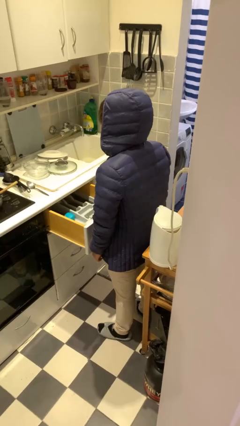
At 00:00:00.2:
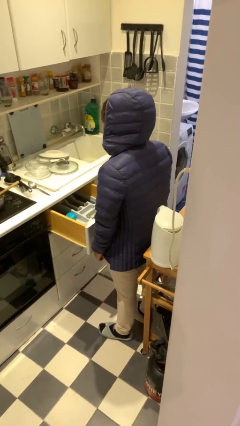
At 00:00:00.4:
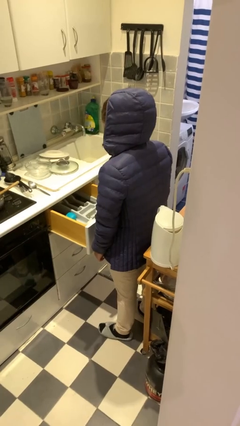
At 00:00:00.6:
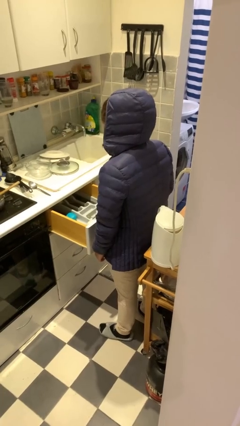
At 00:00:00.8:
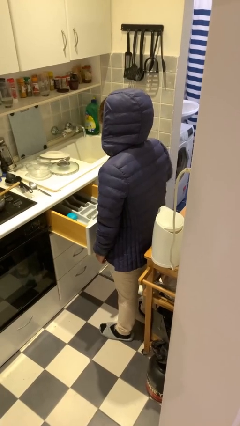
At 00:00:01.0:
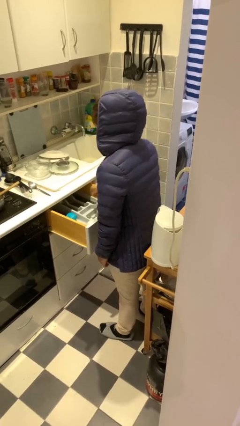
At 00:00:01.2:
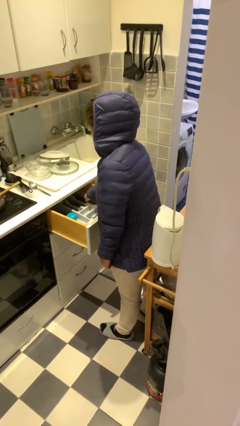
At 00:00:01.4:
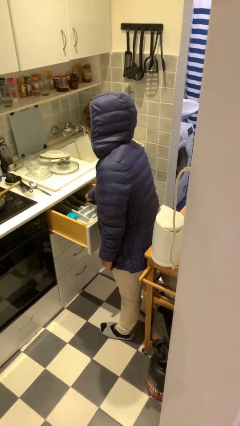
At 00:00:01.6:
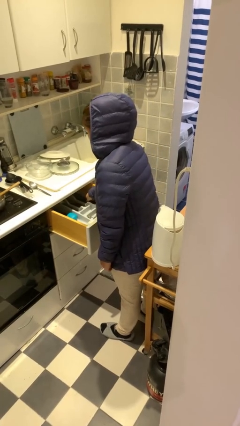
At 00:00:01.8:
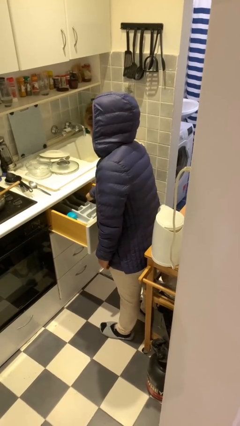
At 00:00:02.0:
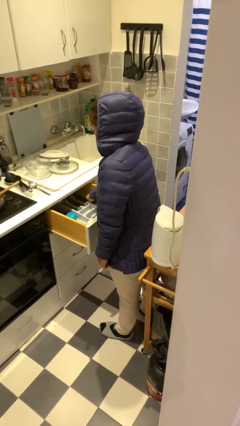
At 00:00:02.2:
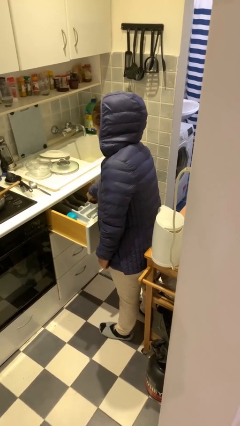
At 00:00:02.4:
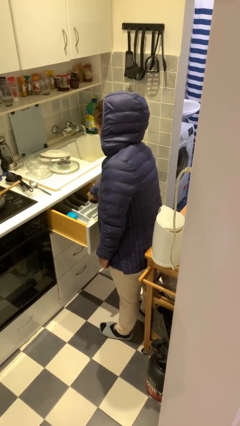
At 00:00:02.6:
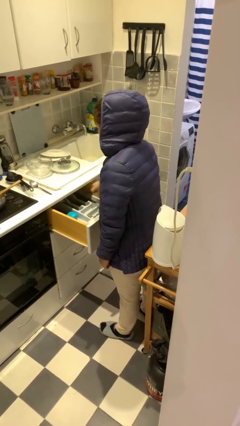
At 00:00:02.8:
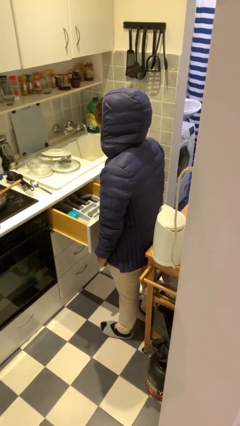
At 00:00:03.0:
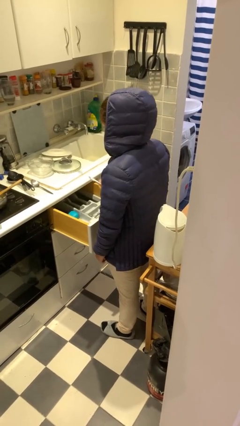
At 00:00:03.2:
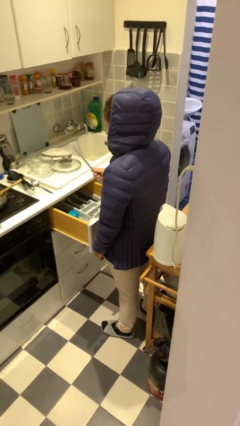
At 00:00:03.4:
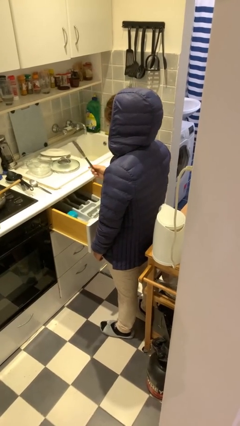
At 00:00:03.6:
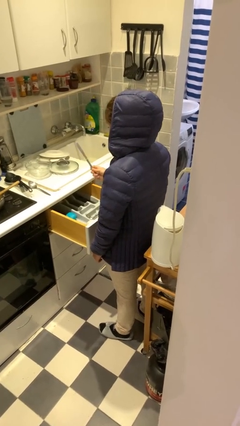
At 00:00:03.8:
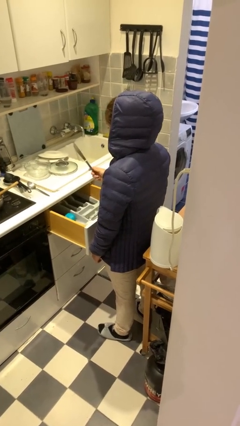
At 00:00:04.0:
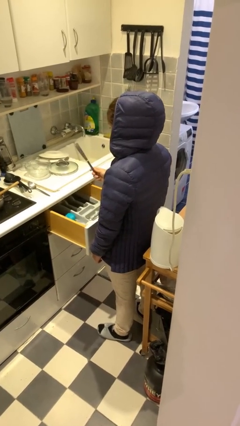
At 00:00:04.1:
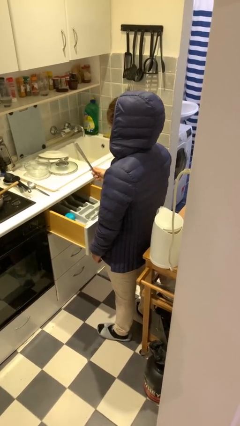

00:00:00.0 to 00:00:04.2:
person takes object from kitchen drawer

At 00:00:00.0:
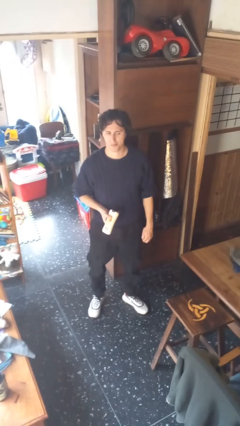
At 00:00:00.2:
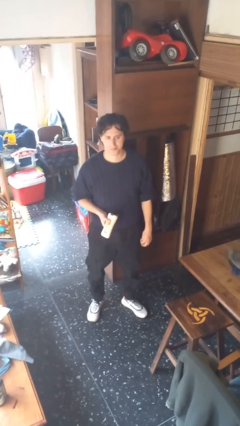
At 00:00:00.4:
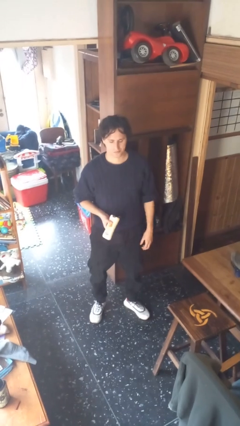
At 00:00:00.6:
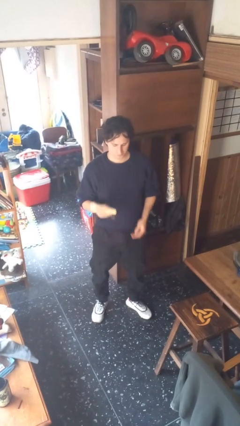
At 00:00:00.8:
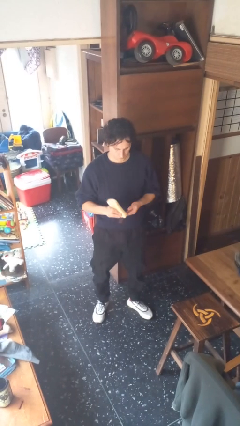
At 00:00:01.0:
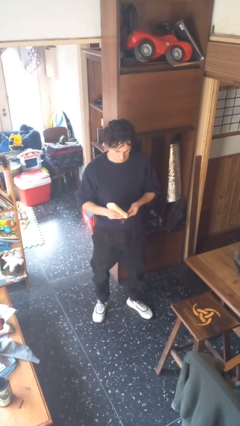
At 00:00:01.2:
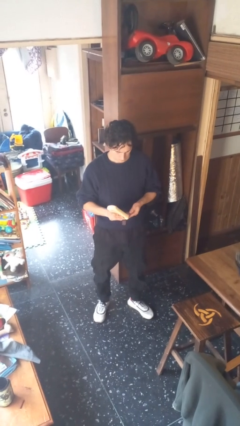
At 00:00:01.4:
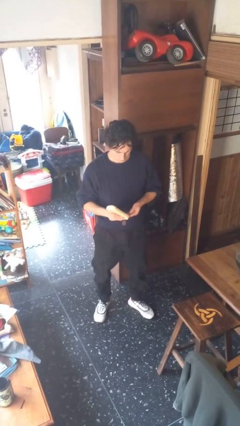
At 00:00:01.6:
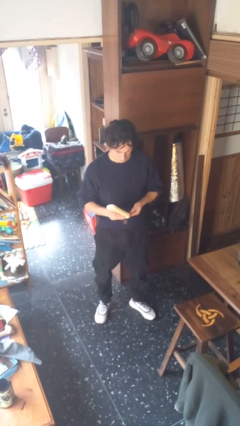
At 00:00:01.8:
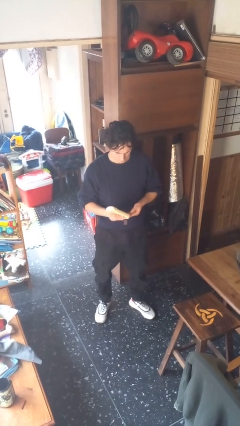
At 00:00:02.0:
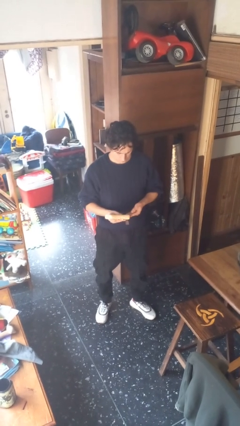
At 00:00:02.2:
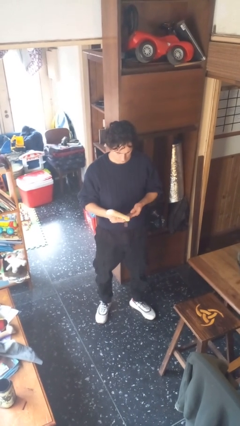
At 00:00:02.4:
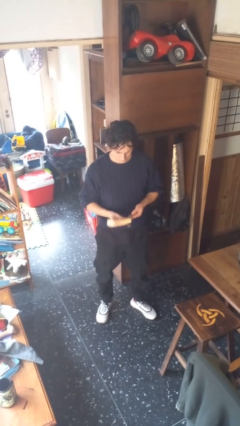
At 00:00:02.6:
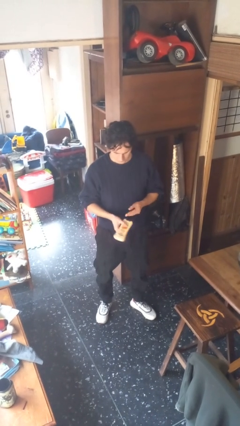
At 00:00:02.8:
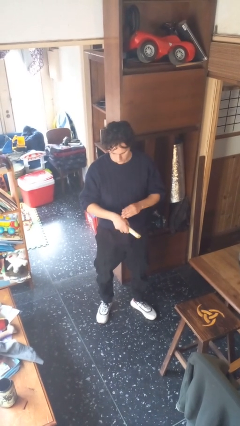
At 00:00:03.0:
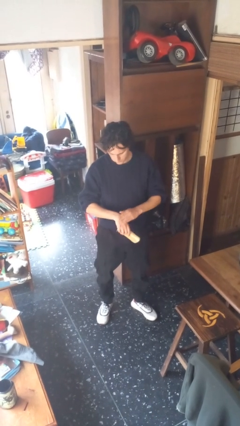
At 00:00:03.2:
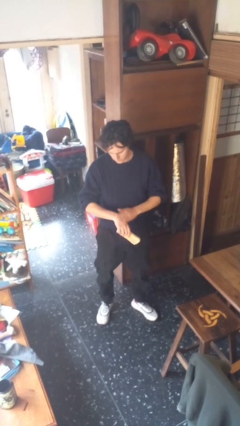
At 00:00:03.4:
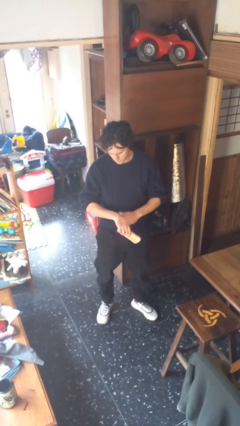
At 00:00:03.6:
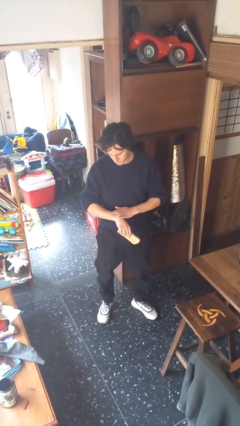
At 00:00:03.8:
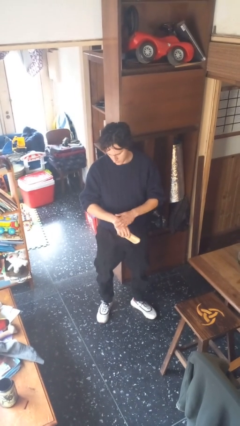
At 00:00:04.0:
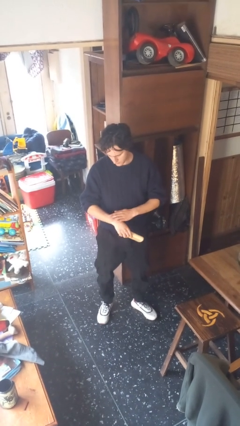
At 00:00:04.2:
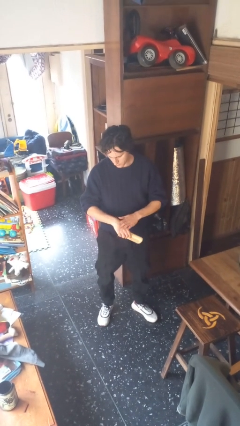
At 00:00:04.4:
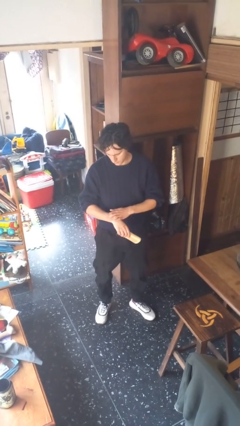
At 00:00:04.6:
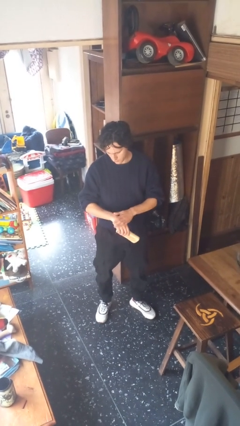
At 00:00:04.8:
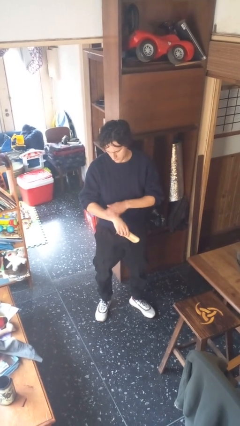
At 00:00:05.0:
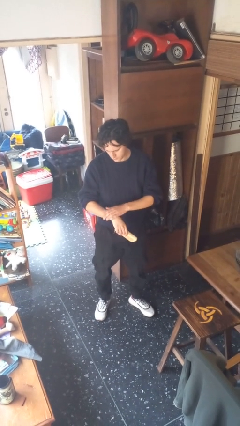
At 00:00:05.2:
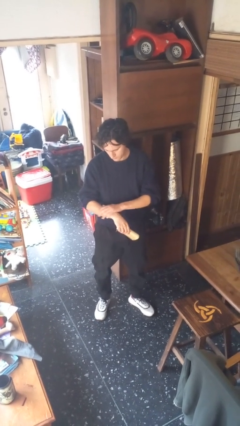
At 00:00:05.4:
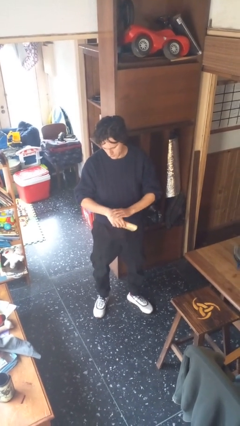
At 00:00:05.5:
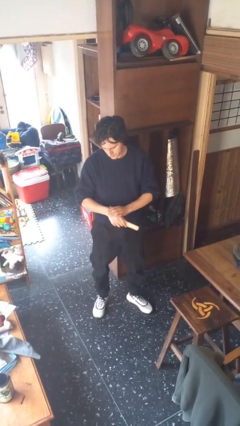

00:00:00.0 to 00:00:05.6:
person applies sunscreen

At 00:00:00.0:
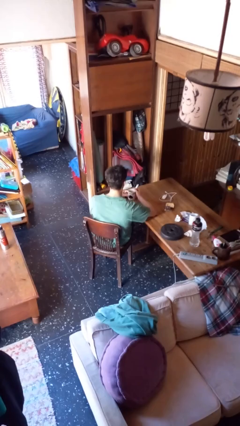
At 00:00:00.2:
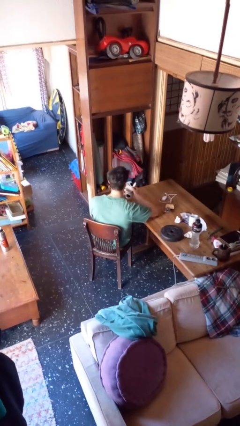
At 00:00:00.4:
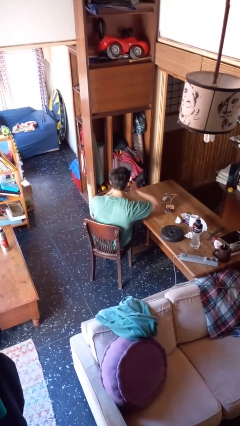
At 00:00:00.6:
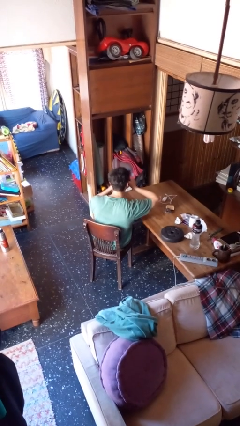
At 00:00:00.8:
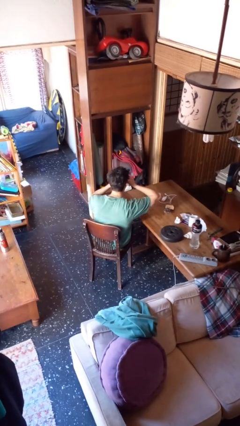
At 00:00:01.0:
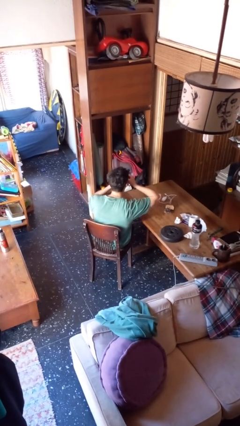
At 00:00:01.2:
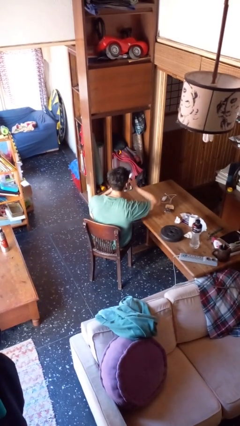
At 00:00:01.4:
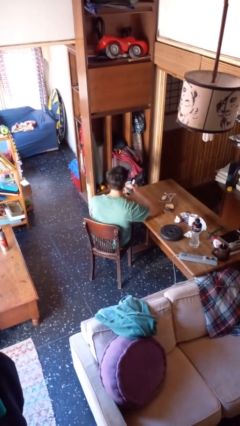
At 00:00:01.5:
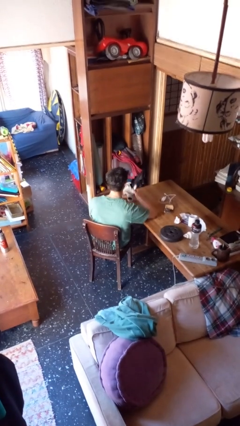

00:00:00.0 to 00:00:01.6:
person drinks from mug

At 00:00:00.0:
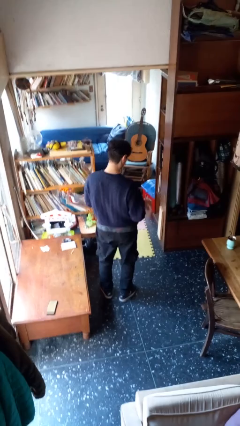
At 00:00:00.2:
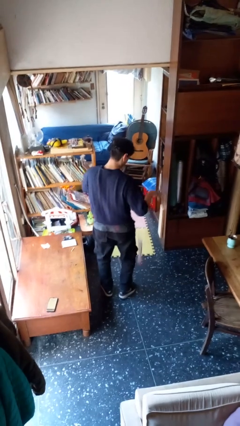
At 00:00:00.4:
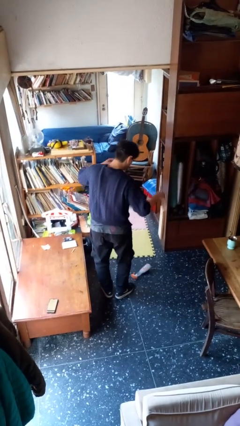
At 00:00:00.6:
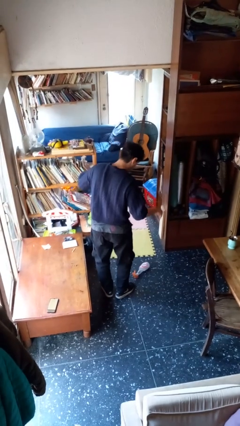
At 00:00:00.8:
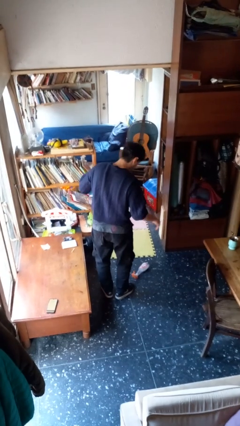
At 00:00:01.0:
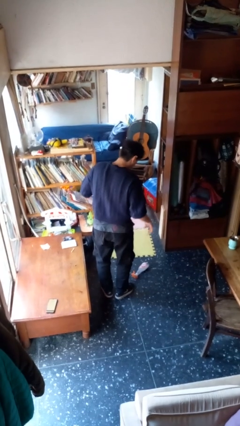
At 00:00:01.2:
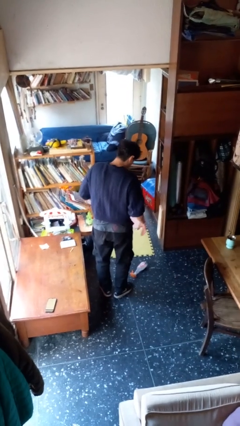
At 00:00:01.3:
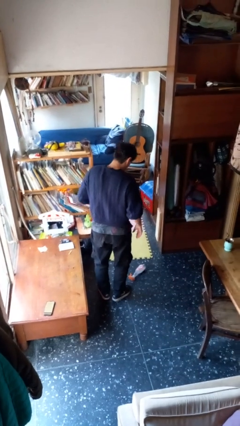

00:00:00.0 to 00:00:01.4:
person drops object

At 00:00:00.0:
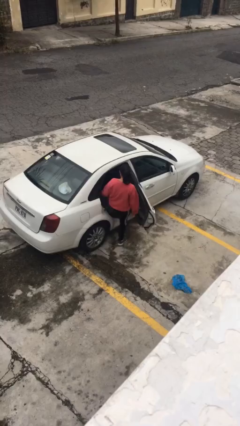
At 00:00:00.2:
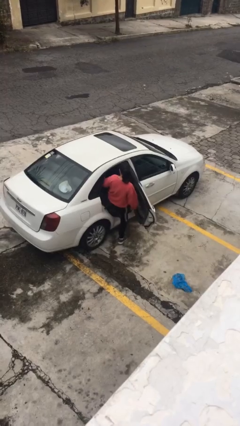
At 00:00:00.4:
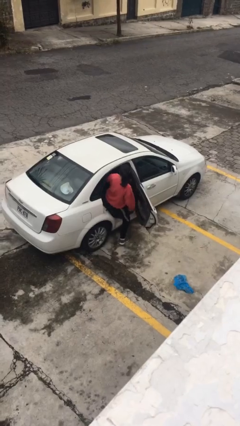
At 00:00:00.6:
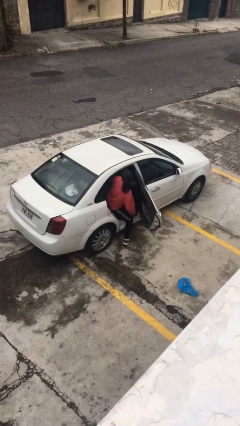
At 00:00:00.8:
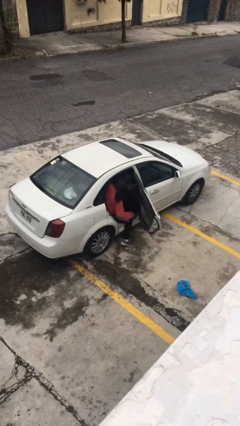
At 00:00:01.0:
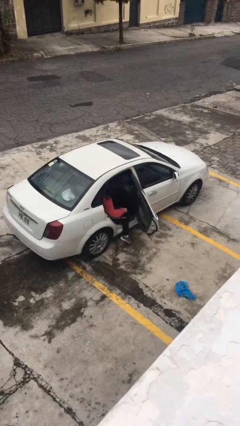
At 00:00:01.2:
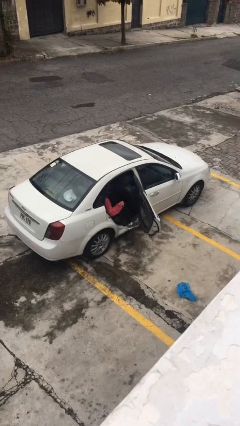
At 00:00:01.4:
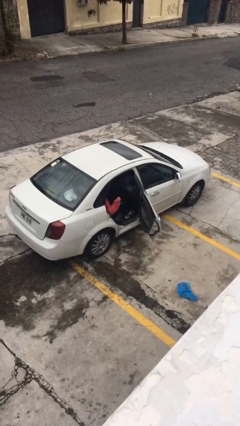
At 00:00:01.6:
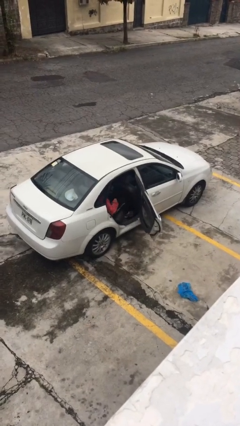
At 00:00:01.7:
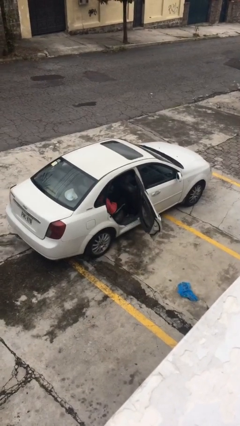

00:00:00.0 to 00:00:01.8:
person enters car

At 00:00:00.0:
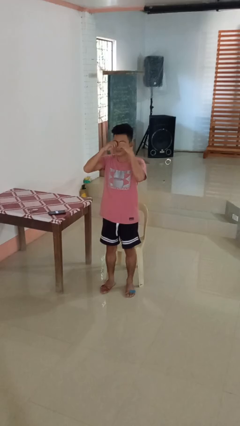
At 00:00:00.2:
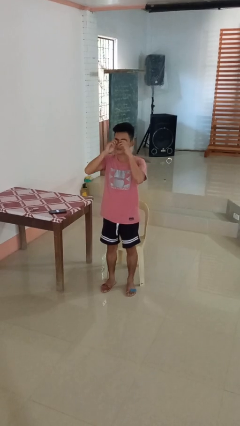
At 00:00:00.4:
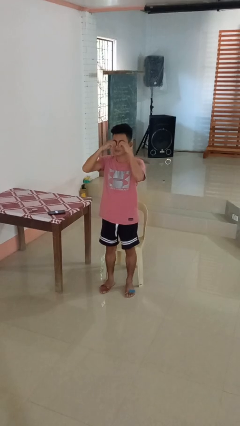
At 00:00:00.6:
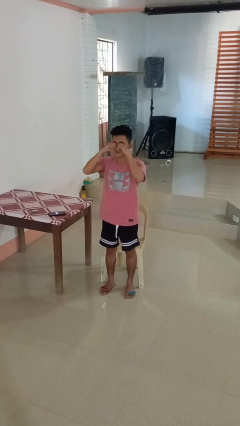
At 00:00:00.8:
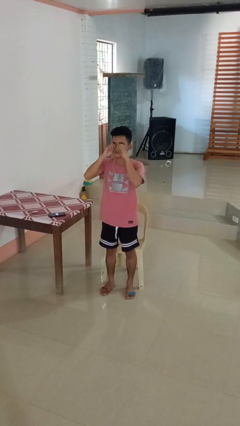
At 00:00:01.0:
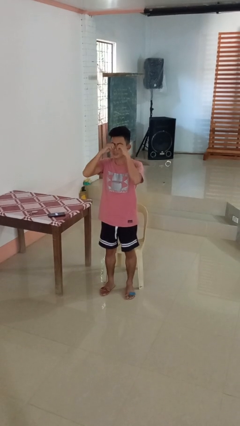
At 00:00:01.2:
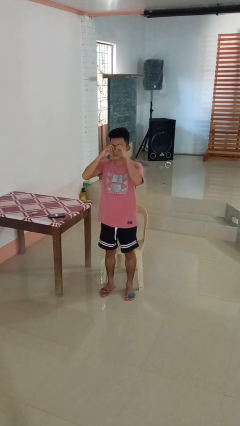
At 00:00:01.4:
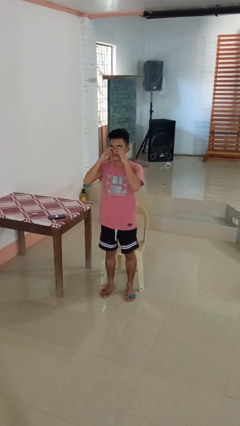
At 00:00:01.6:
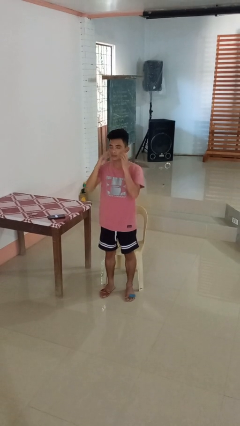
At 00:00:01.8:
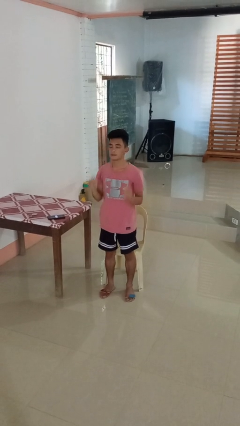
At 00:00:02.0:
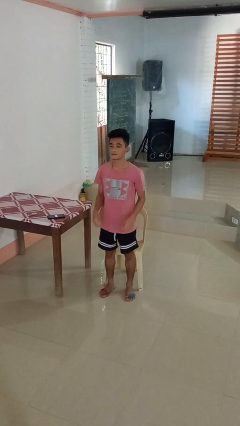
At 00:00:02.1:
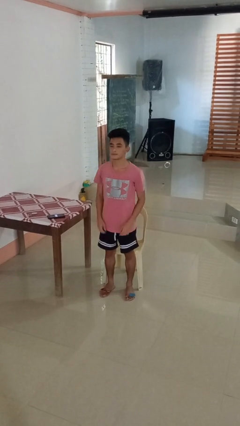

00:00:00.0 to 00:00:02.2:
person rubs eyes
